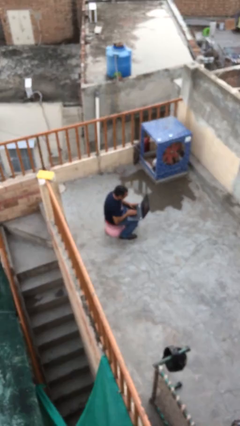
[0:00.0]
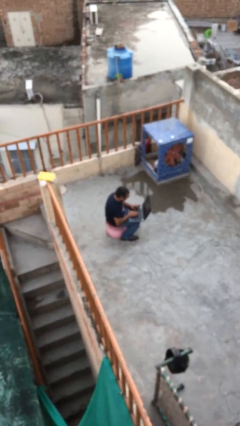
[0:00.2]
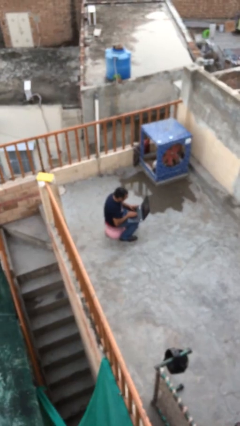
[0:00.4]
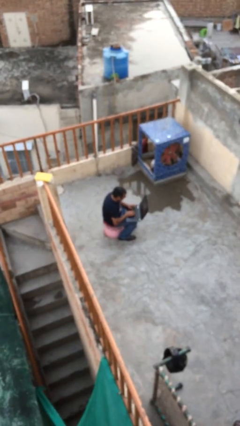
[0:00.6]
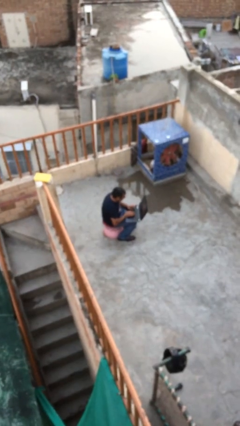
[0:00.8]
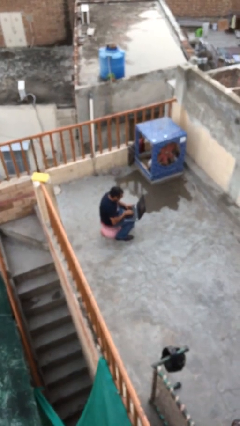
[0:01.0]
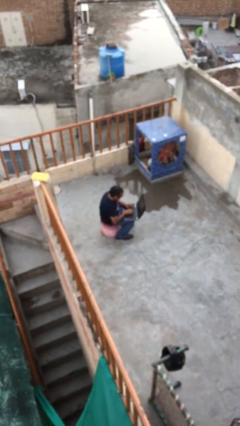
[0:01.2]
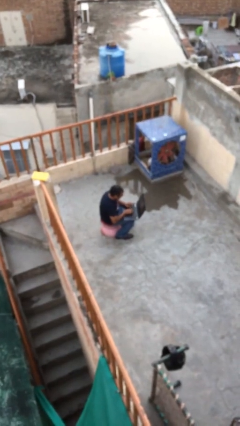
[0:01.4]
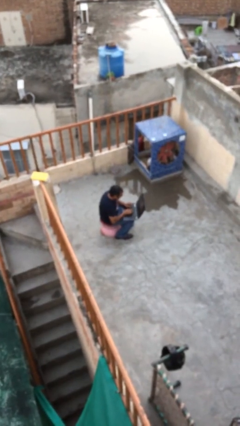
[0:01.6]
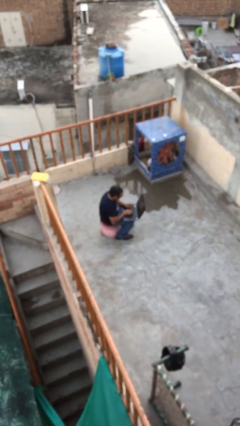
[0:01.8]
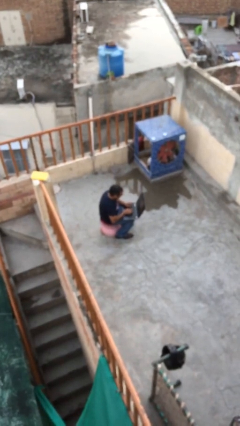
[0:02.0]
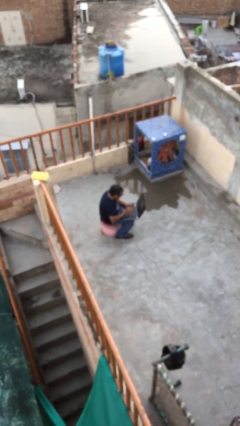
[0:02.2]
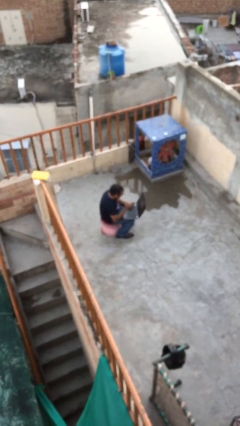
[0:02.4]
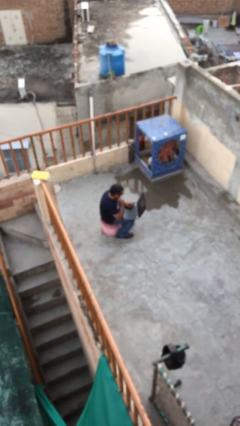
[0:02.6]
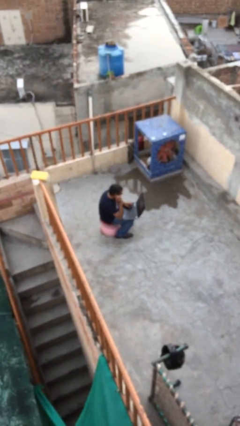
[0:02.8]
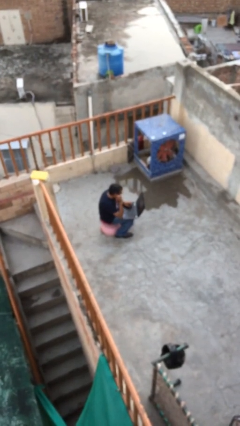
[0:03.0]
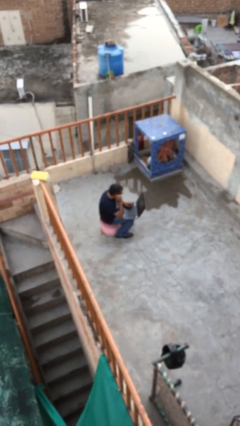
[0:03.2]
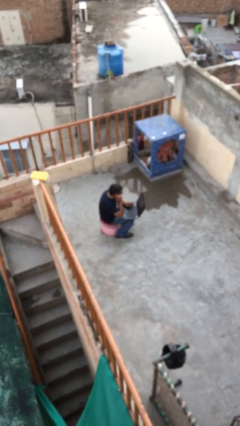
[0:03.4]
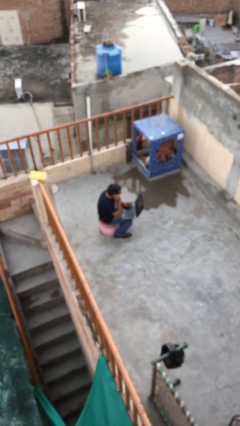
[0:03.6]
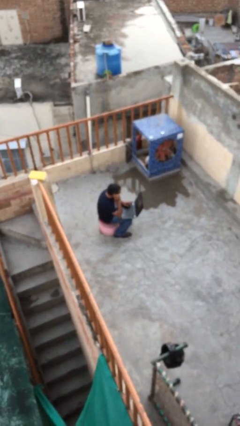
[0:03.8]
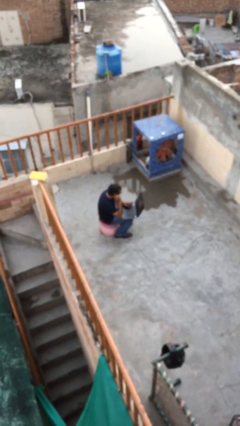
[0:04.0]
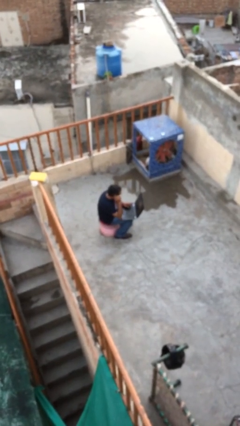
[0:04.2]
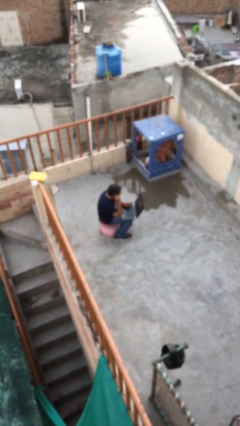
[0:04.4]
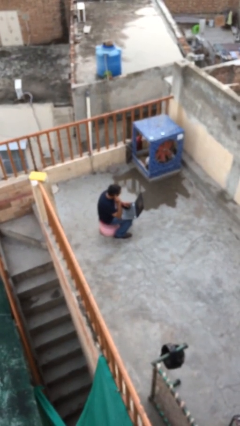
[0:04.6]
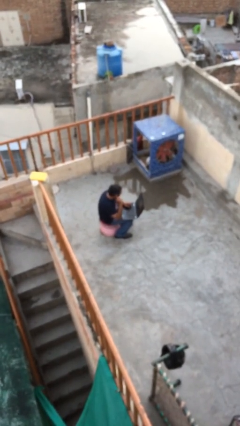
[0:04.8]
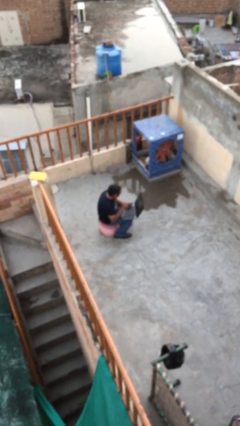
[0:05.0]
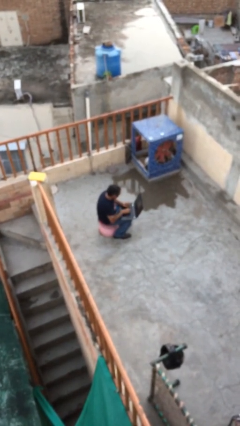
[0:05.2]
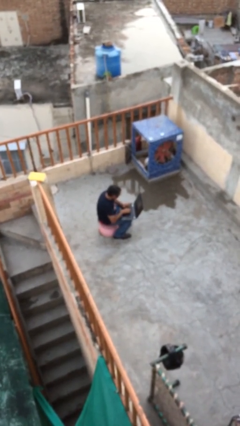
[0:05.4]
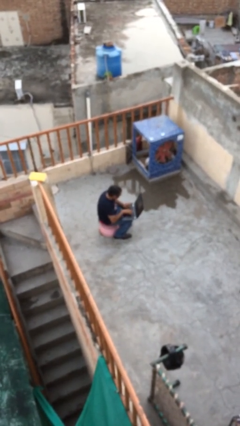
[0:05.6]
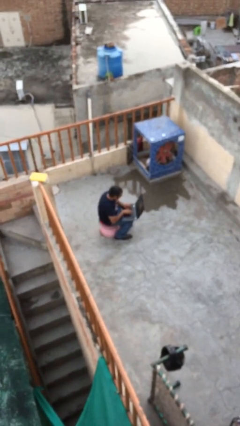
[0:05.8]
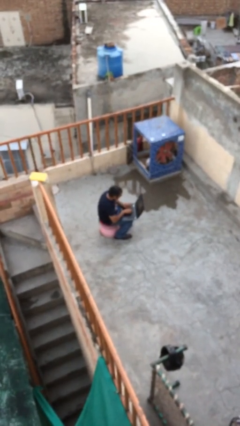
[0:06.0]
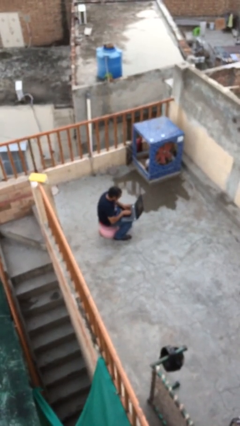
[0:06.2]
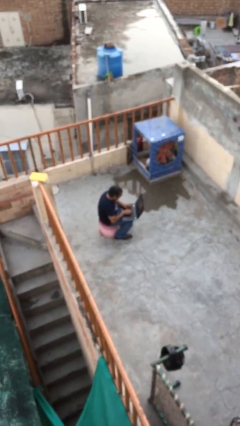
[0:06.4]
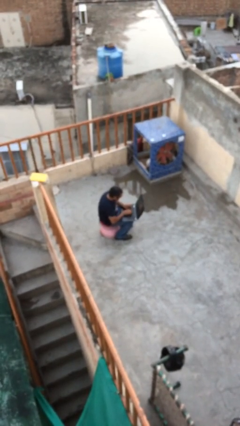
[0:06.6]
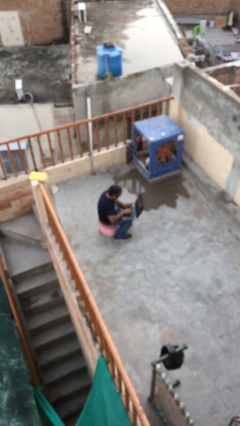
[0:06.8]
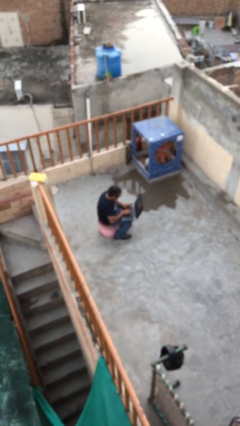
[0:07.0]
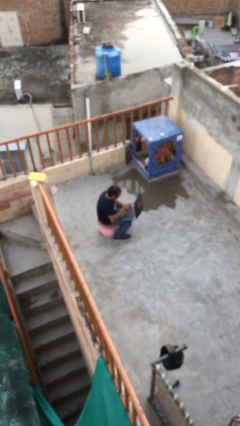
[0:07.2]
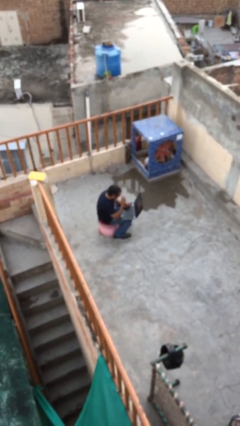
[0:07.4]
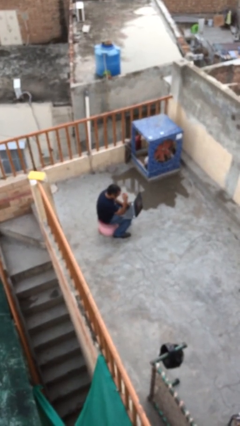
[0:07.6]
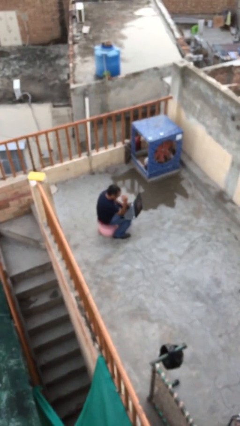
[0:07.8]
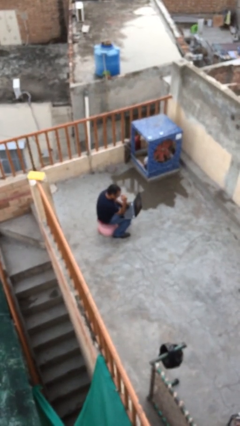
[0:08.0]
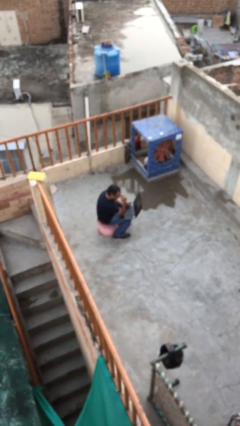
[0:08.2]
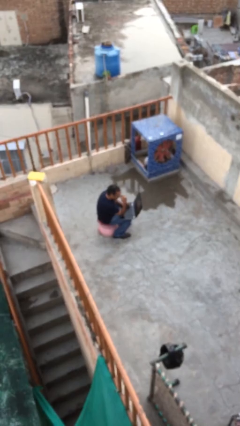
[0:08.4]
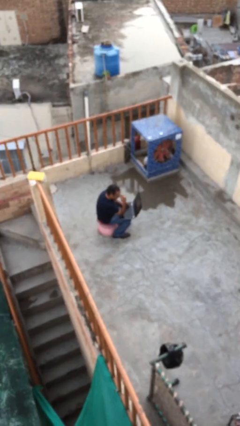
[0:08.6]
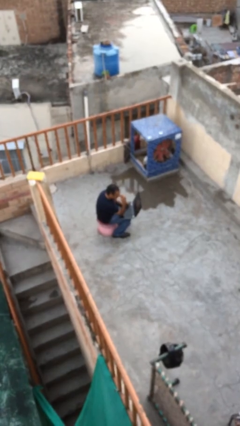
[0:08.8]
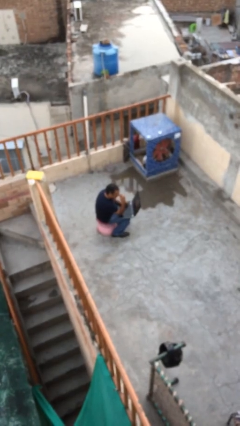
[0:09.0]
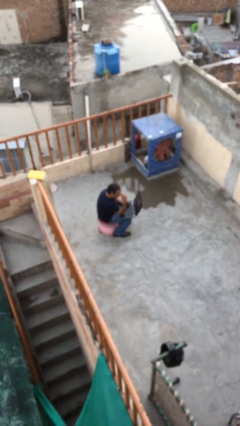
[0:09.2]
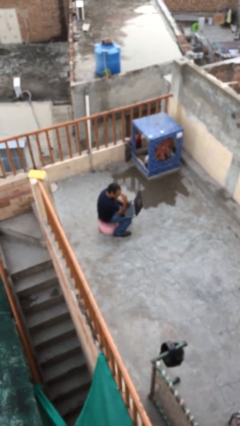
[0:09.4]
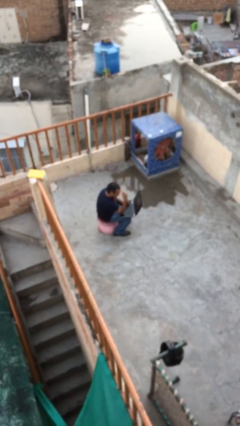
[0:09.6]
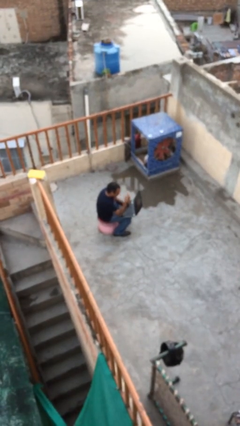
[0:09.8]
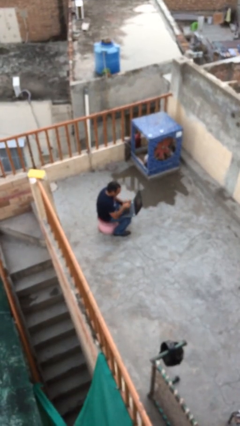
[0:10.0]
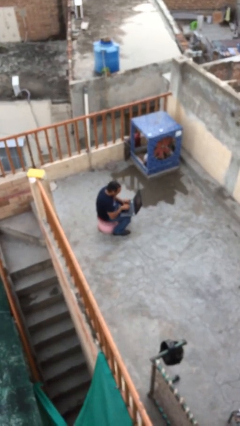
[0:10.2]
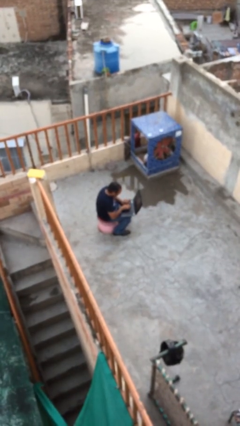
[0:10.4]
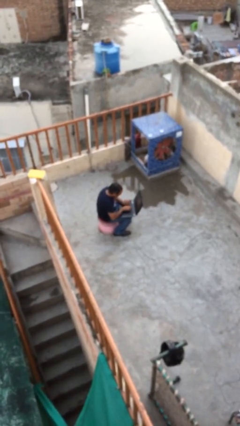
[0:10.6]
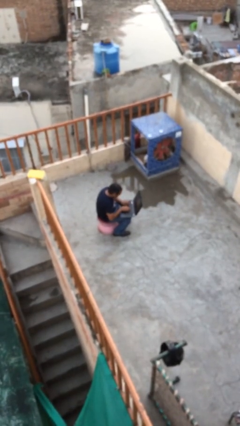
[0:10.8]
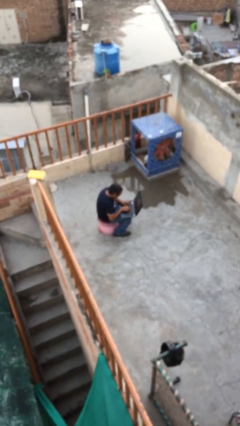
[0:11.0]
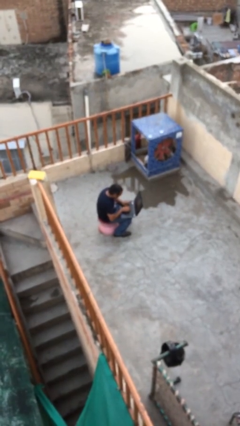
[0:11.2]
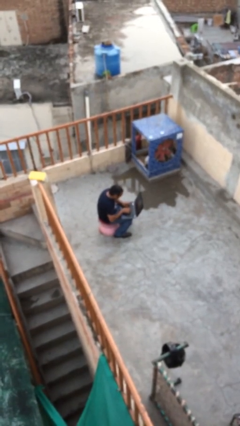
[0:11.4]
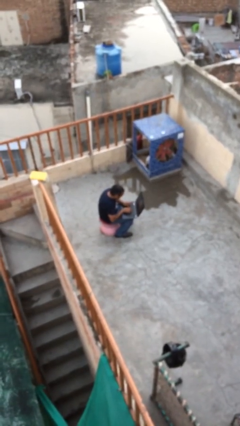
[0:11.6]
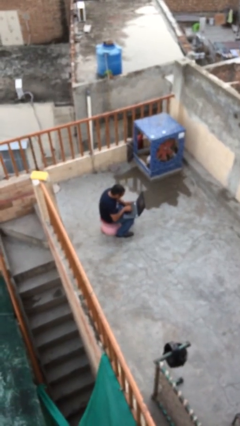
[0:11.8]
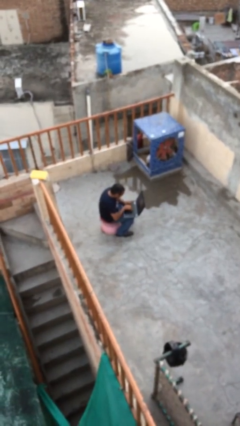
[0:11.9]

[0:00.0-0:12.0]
person interacts with laptop

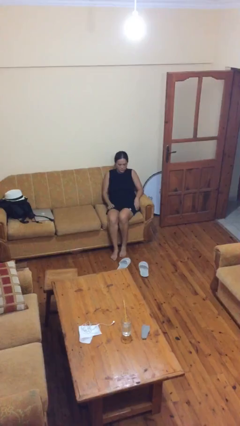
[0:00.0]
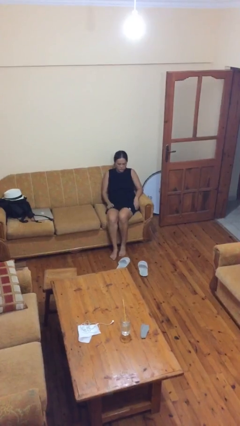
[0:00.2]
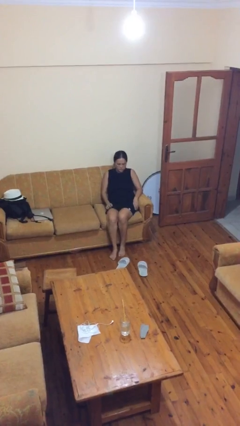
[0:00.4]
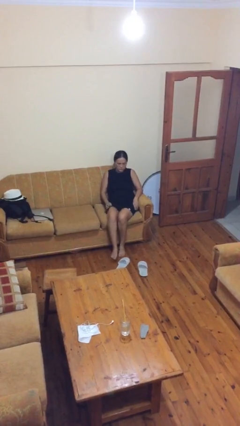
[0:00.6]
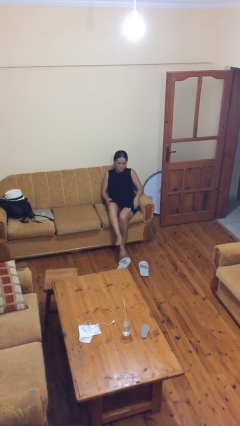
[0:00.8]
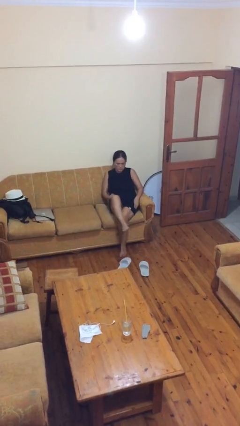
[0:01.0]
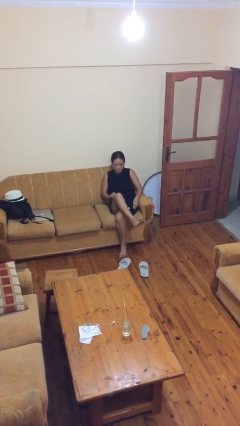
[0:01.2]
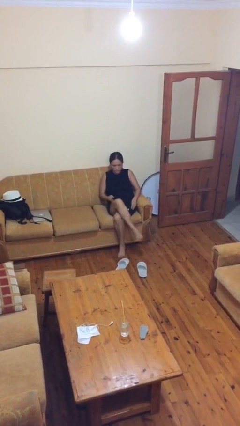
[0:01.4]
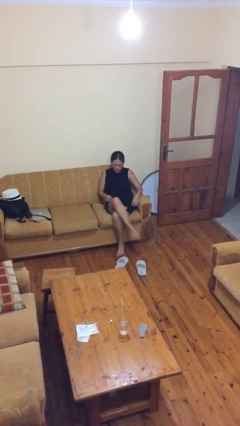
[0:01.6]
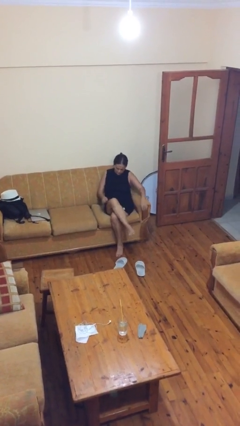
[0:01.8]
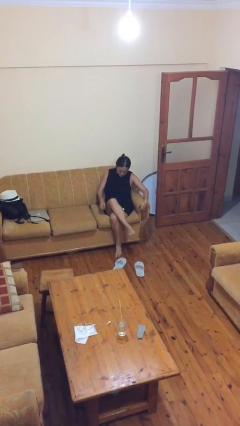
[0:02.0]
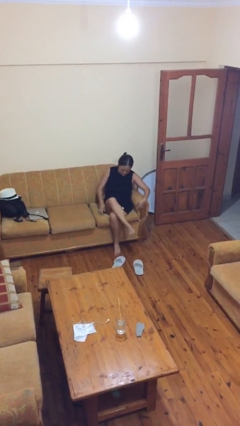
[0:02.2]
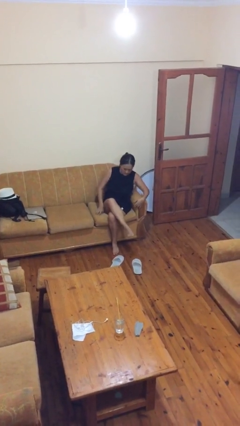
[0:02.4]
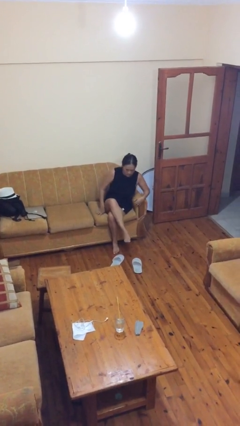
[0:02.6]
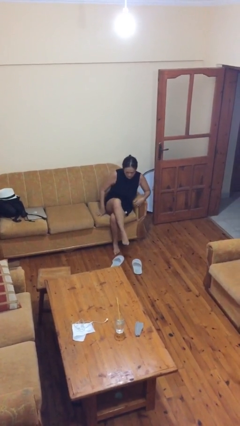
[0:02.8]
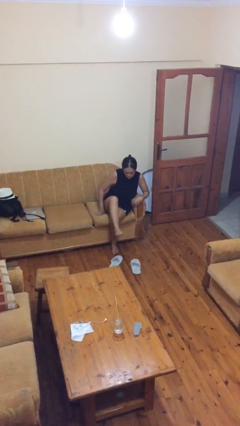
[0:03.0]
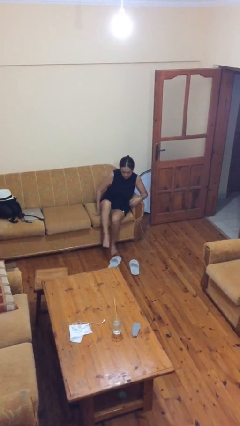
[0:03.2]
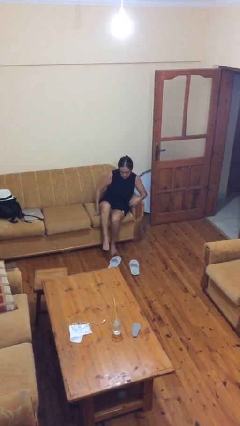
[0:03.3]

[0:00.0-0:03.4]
person crosses legs

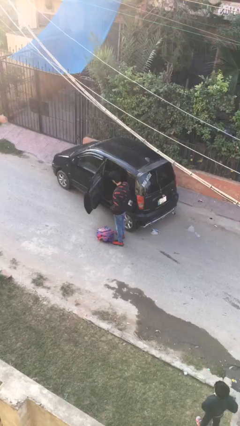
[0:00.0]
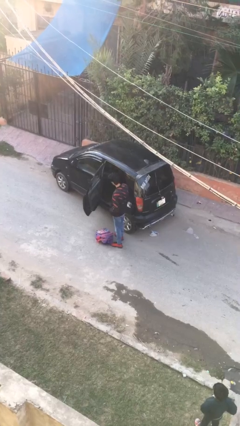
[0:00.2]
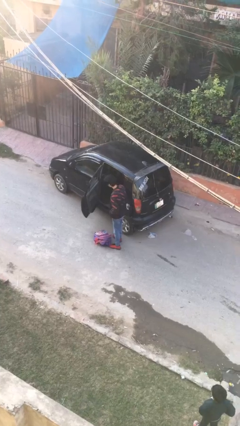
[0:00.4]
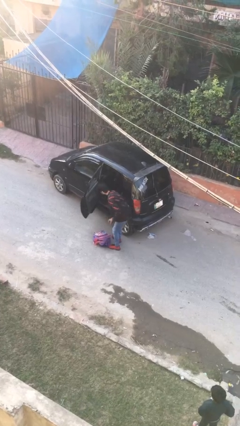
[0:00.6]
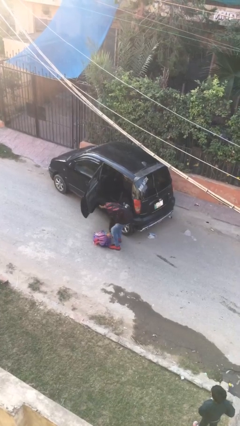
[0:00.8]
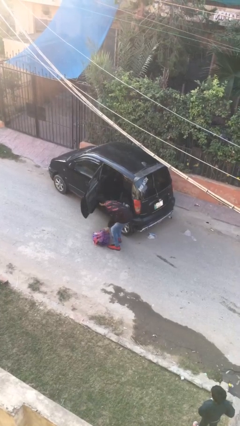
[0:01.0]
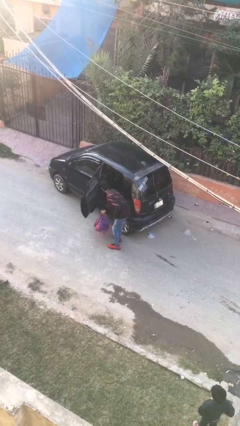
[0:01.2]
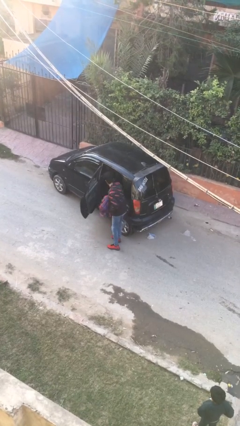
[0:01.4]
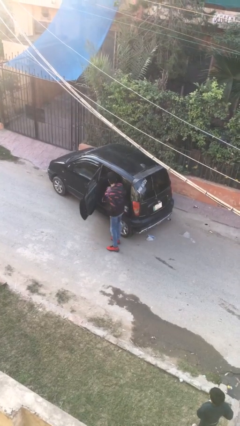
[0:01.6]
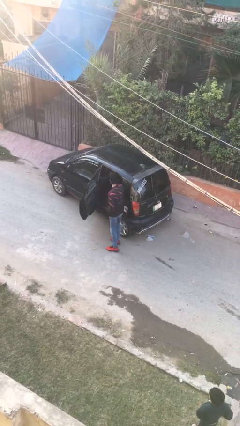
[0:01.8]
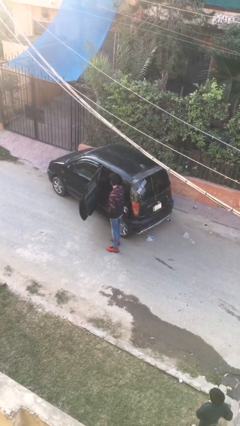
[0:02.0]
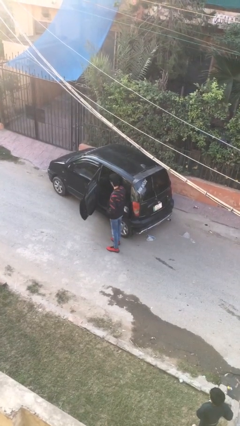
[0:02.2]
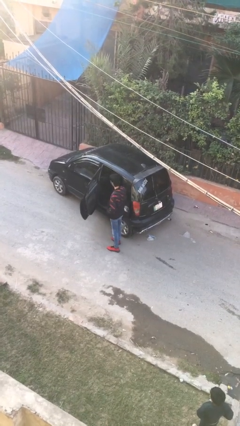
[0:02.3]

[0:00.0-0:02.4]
person loads car
